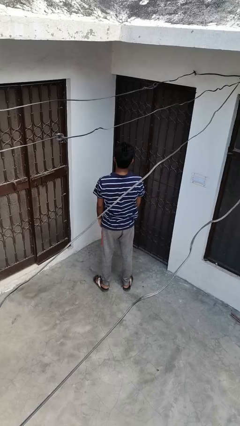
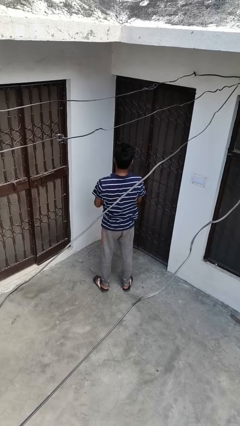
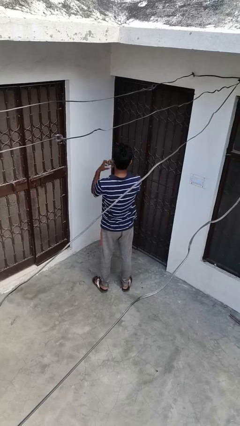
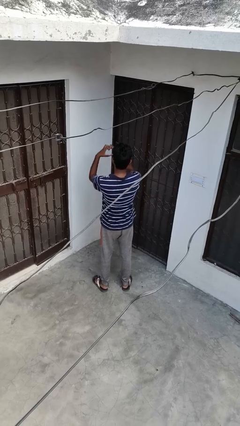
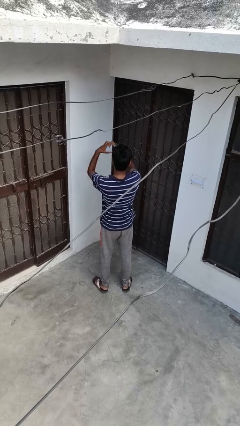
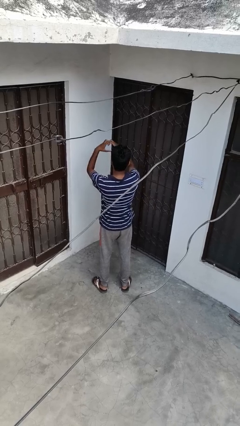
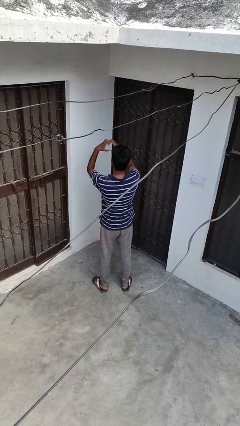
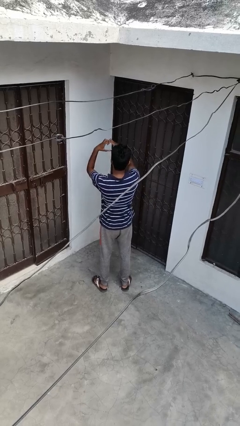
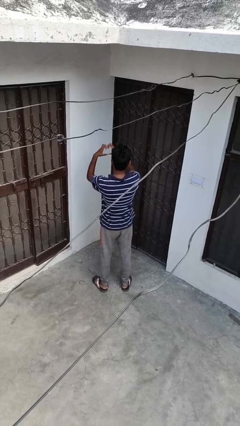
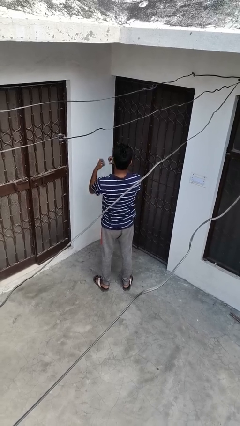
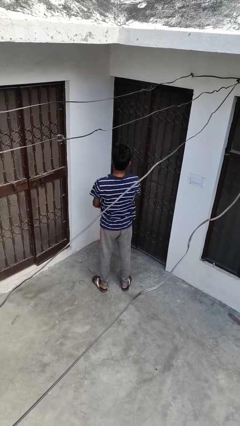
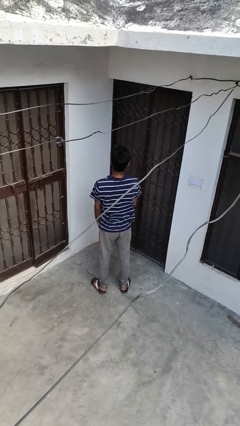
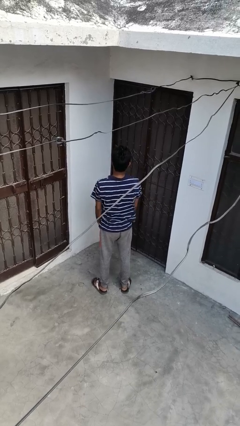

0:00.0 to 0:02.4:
person gestures heart

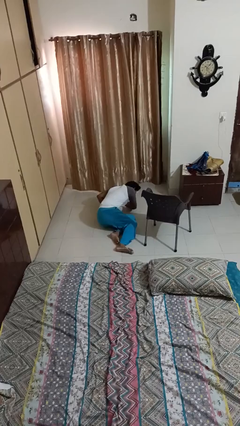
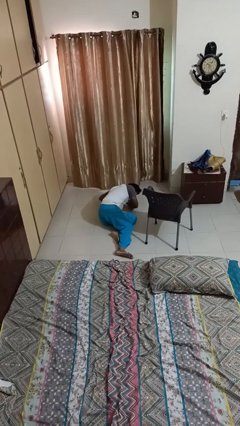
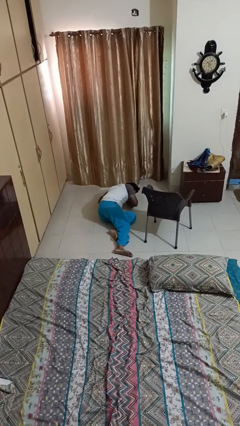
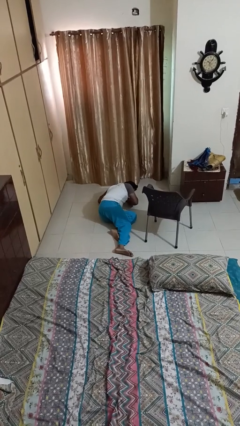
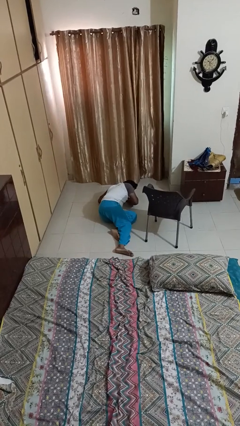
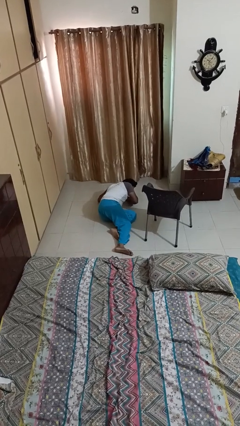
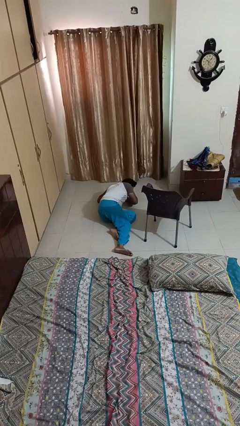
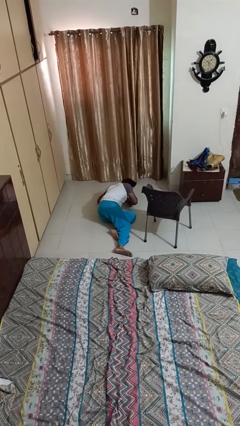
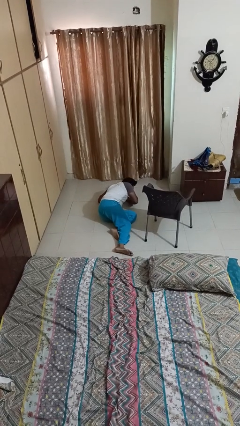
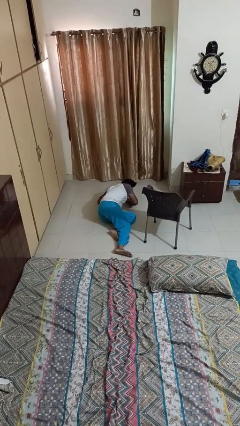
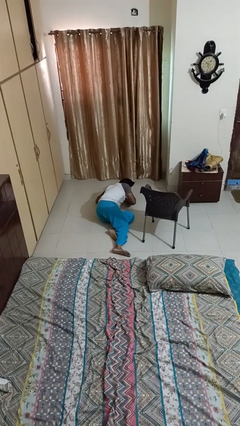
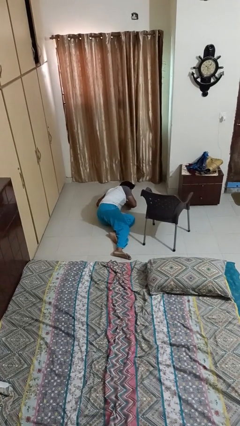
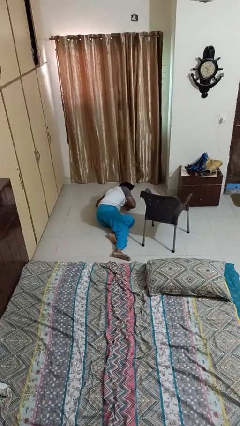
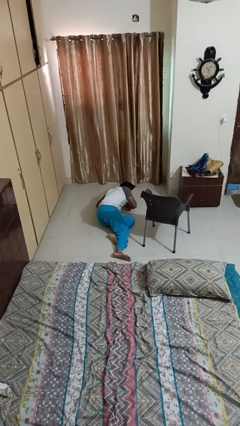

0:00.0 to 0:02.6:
person lies down on floor

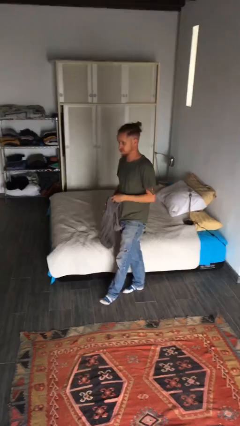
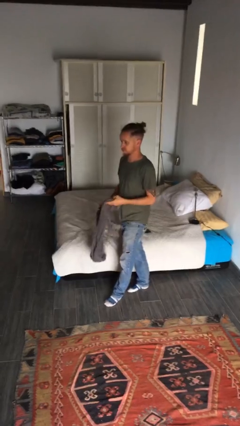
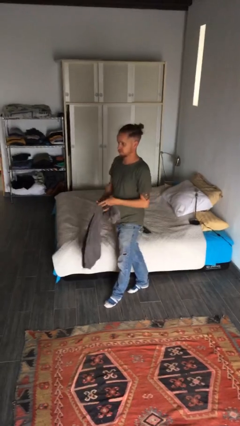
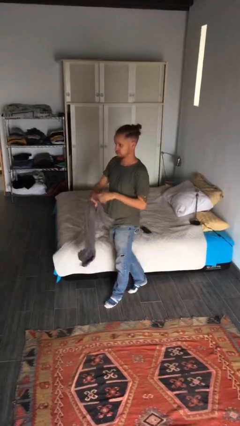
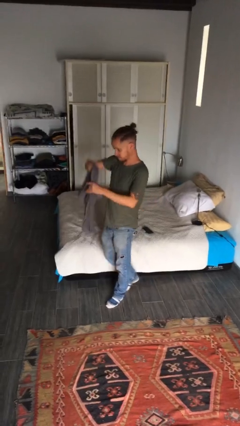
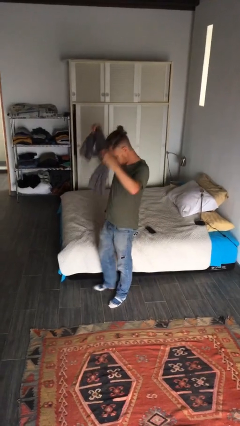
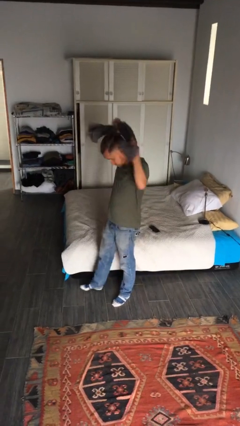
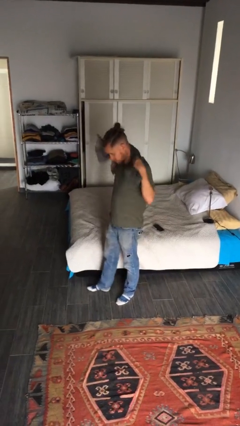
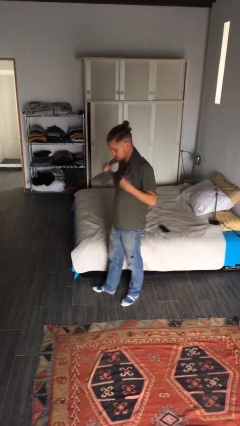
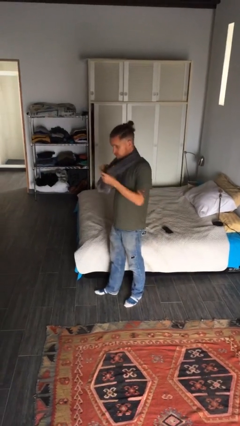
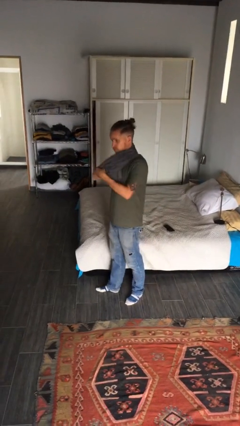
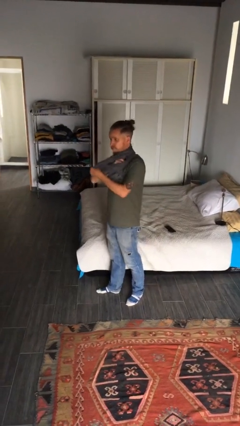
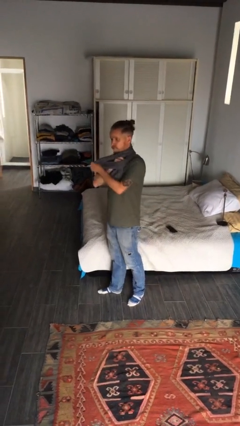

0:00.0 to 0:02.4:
person puts on scarf

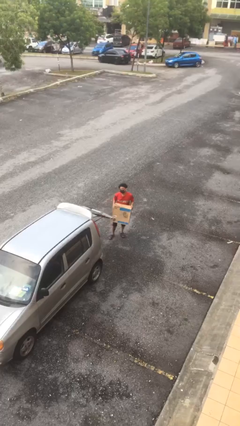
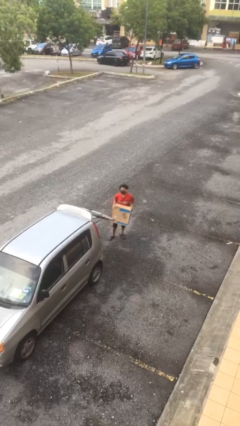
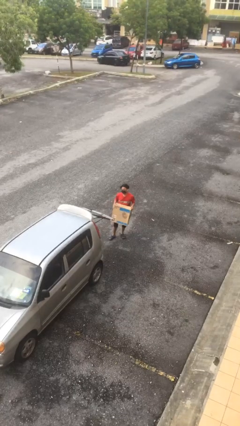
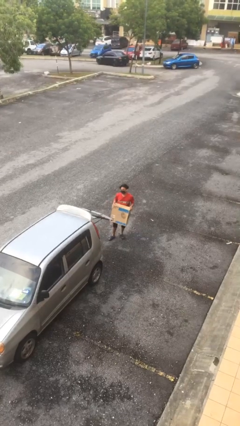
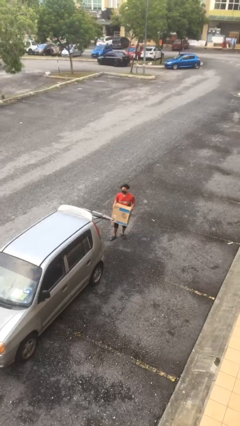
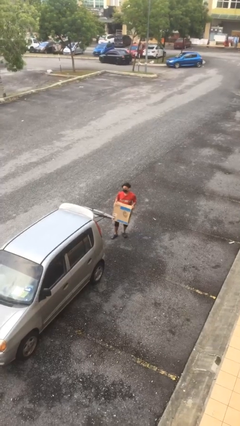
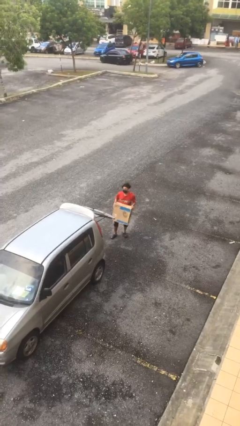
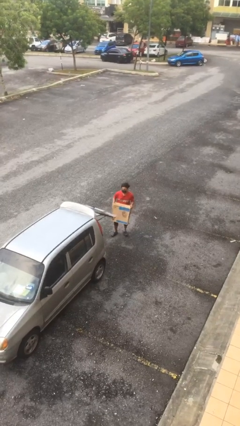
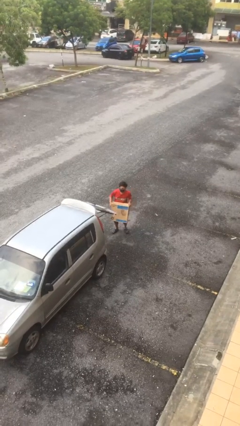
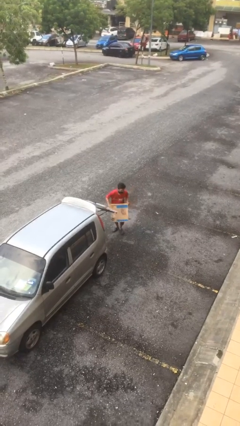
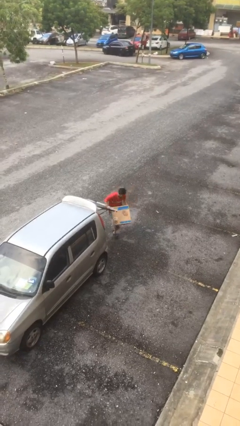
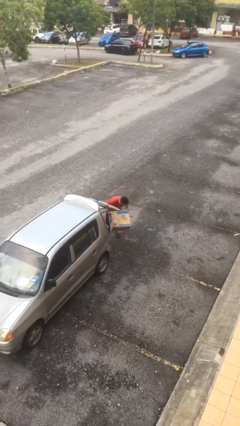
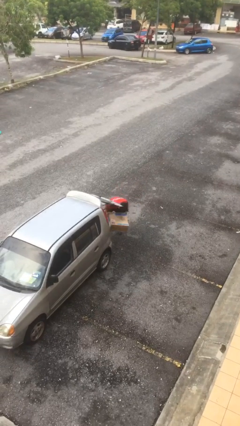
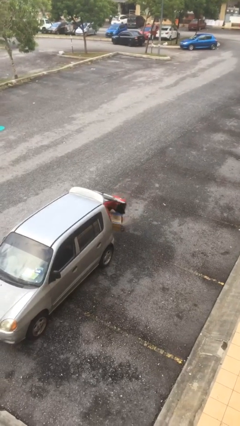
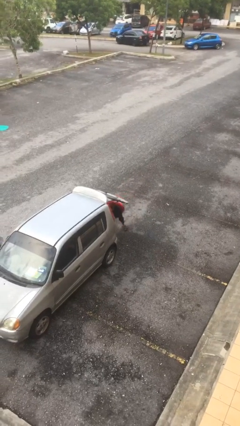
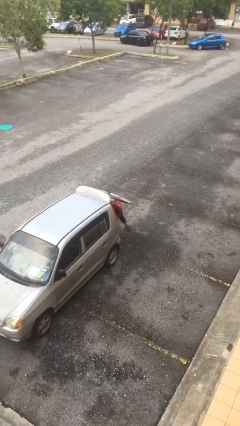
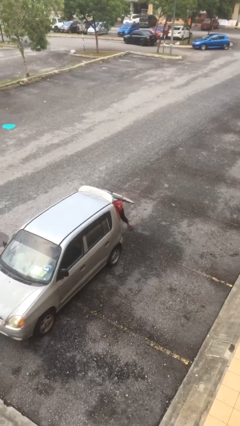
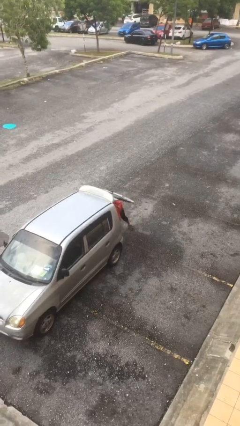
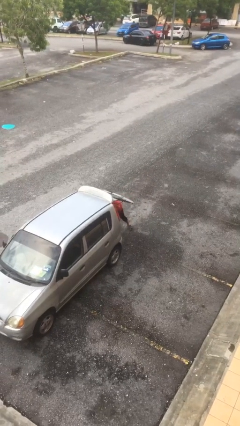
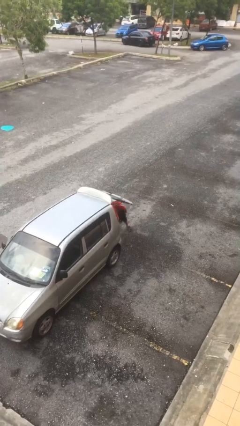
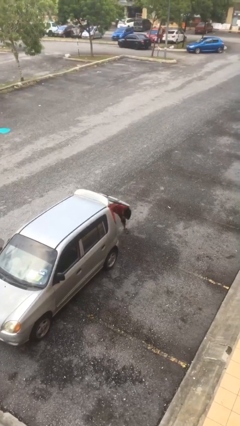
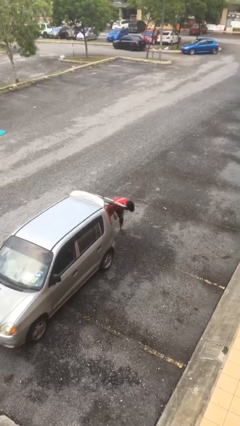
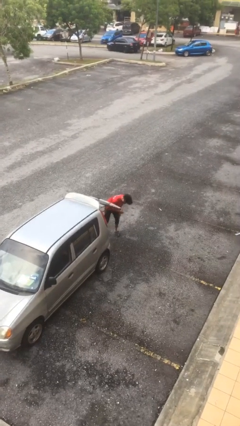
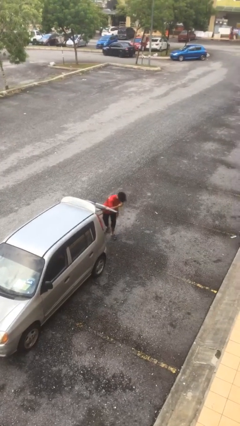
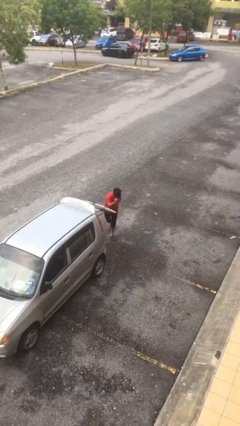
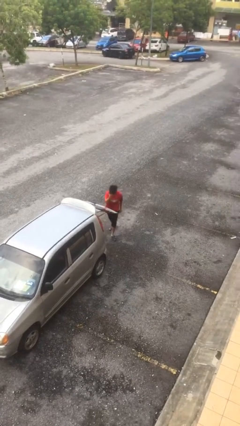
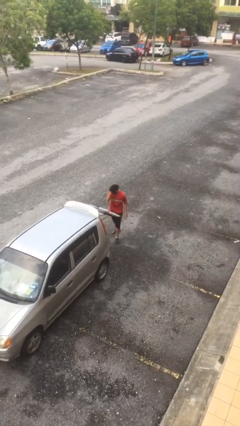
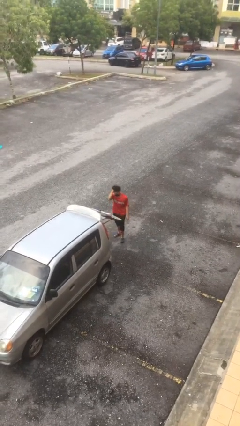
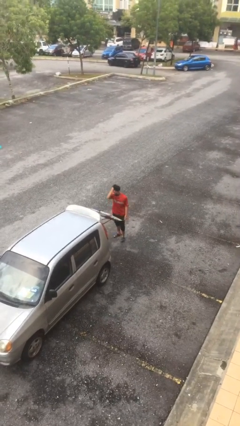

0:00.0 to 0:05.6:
person loads car

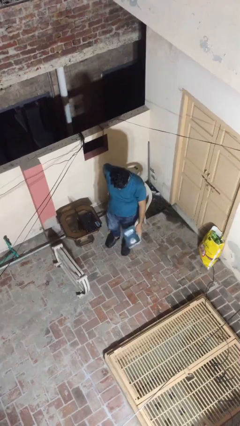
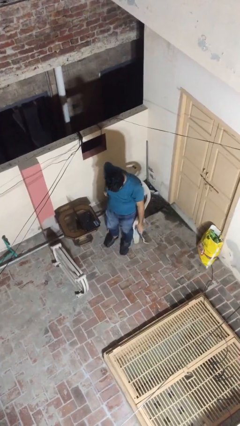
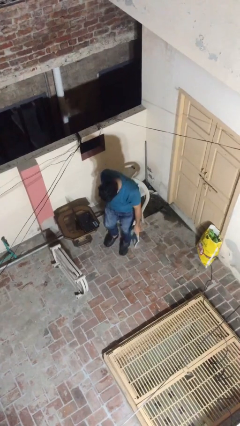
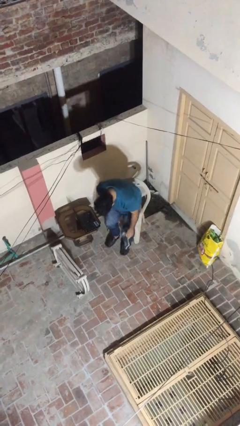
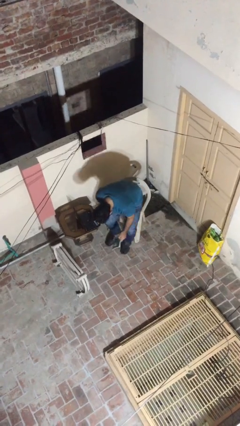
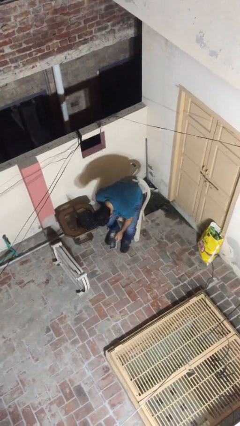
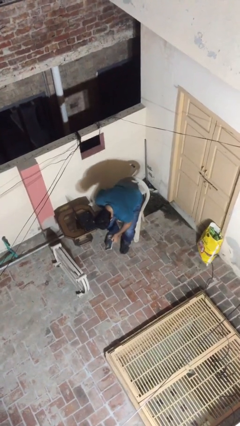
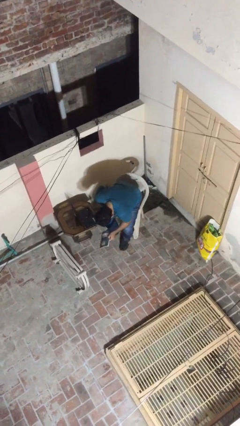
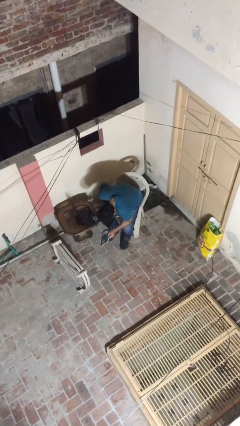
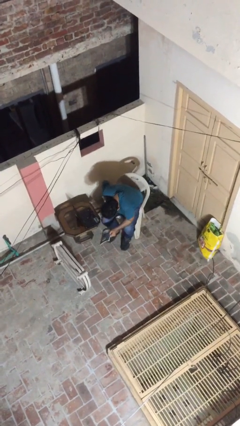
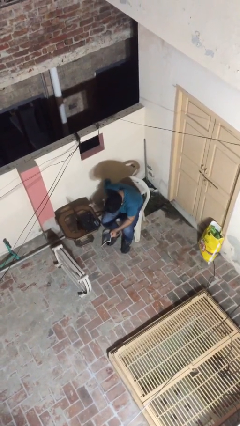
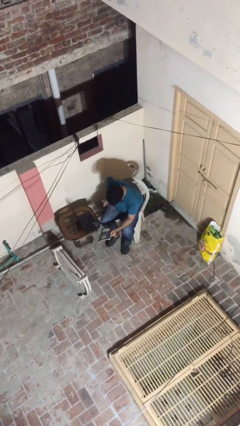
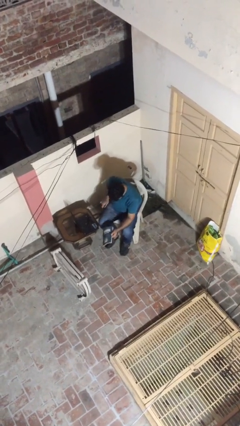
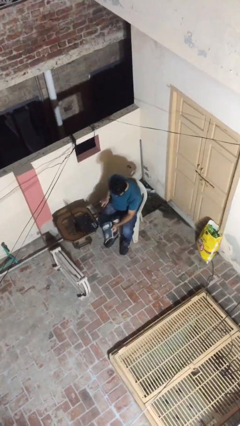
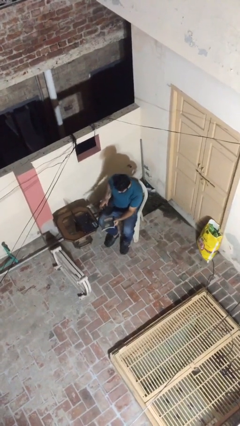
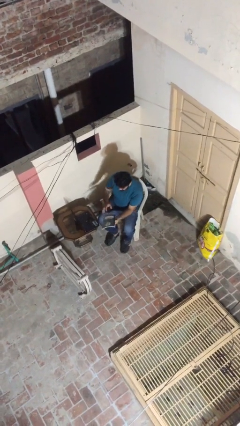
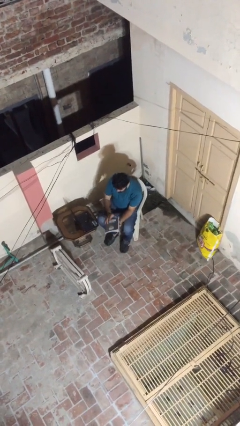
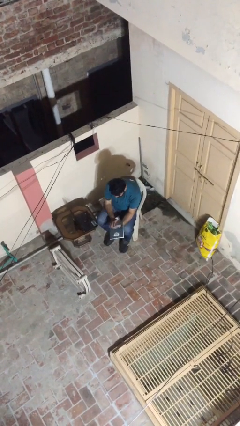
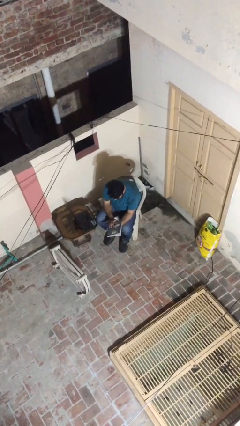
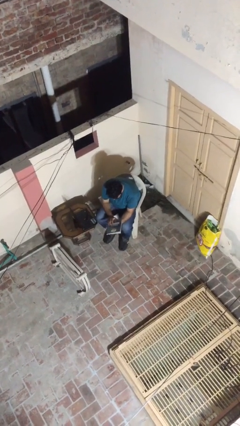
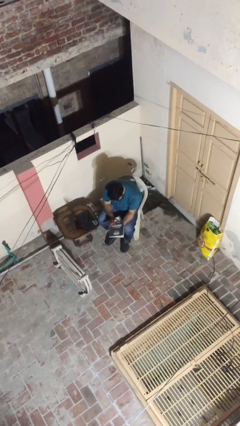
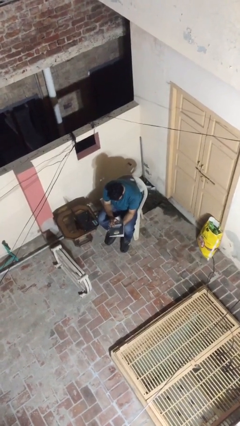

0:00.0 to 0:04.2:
person sits down

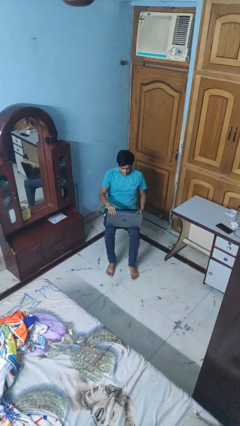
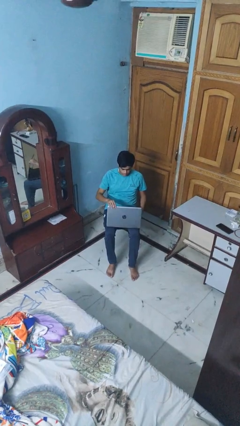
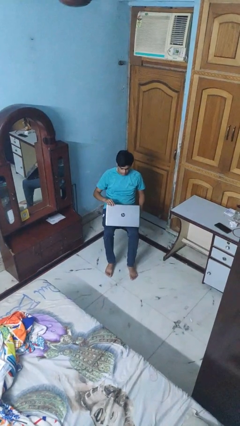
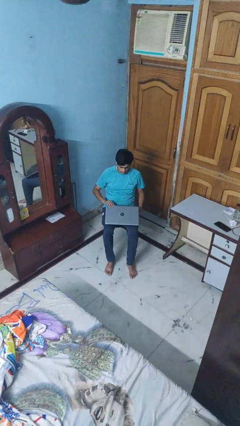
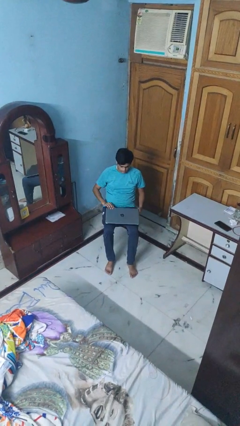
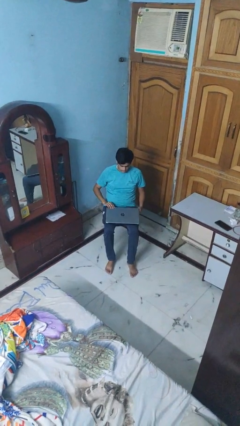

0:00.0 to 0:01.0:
person closes laptop
